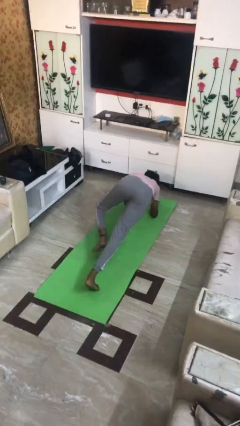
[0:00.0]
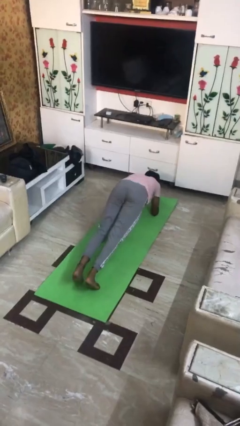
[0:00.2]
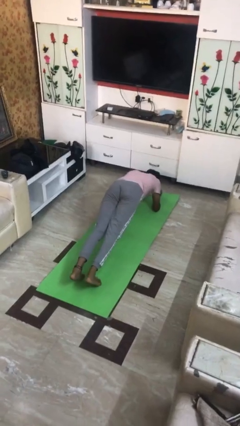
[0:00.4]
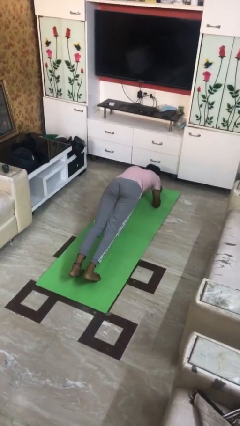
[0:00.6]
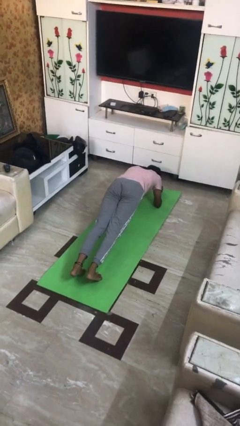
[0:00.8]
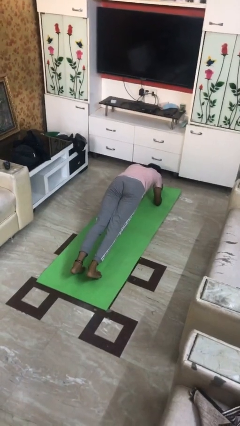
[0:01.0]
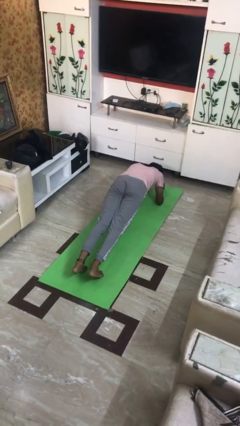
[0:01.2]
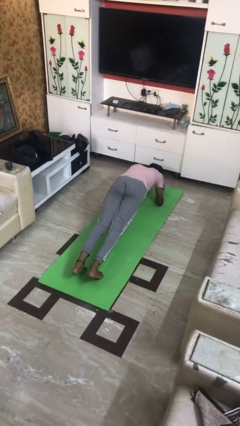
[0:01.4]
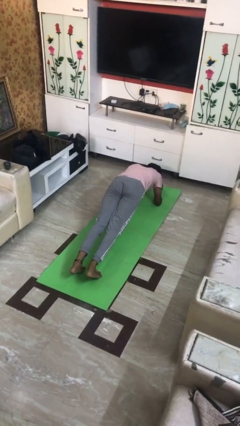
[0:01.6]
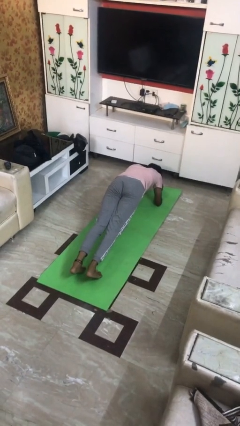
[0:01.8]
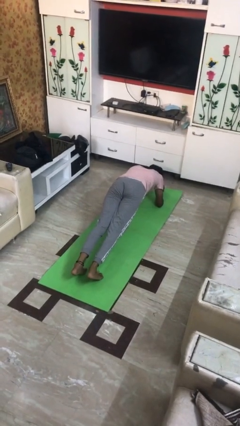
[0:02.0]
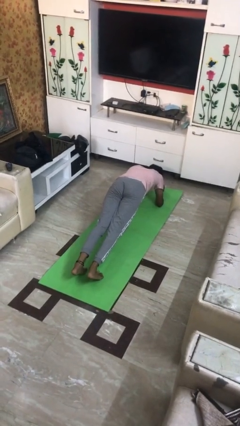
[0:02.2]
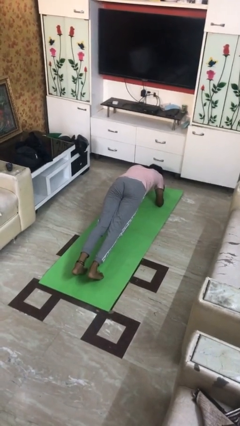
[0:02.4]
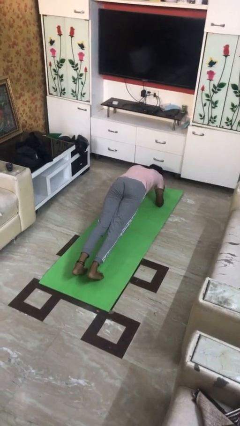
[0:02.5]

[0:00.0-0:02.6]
person exercises with plank

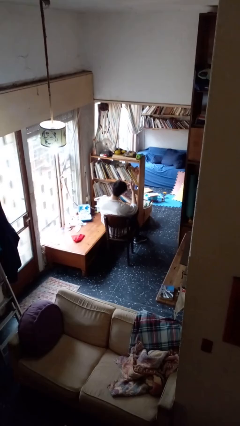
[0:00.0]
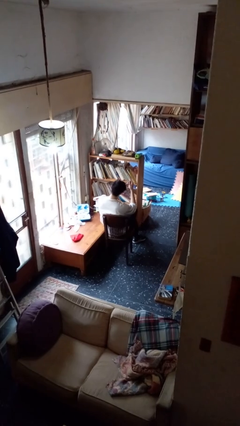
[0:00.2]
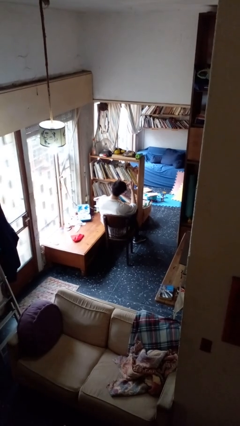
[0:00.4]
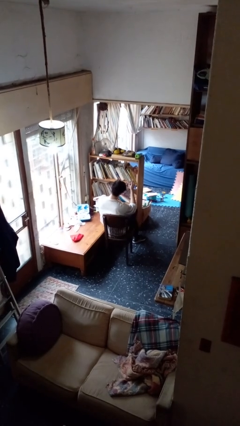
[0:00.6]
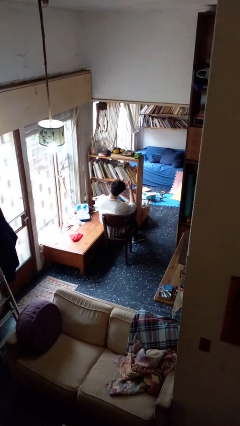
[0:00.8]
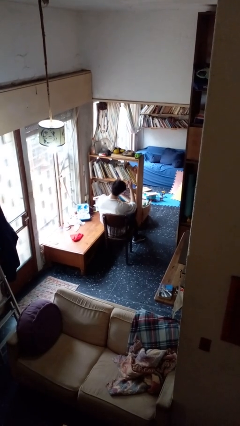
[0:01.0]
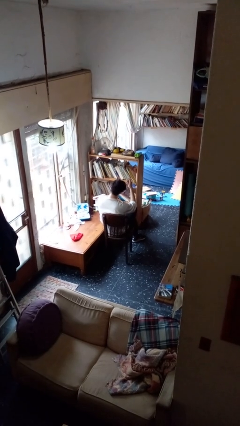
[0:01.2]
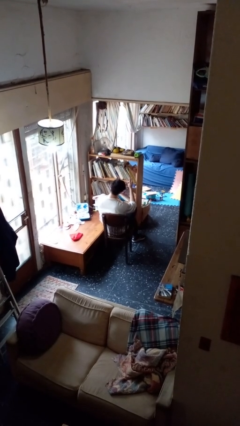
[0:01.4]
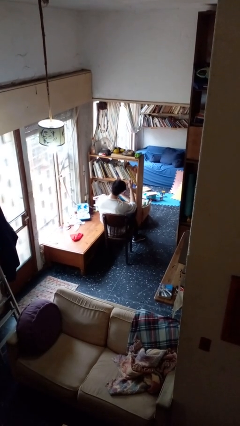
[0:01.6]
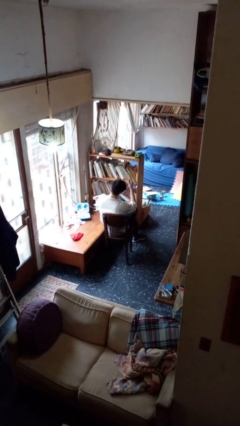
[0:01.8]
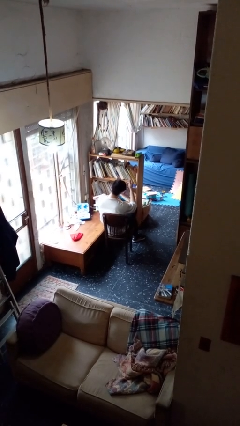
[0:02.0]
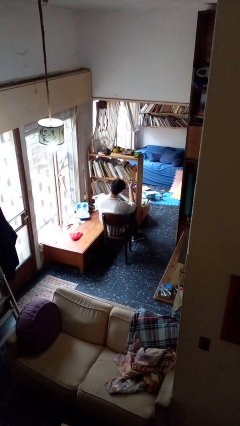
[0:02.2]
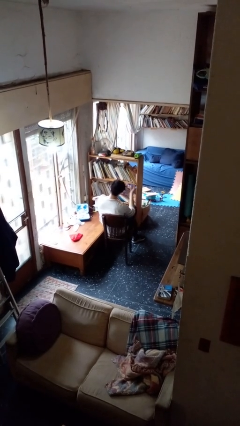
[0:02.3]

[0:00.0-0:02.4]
person clips fingernails

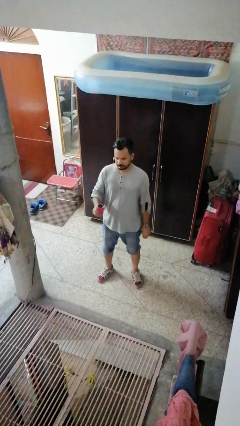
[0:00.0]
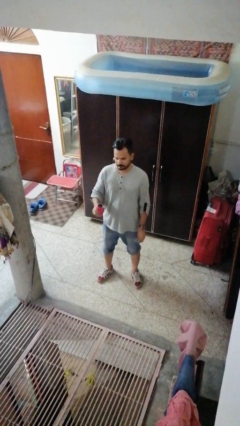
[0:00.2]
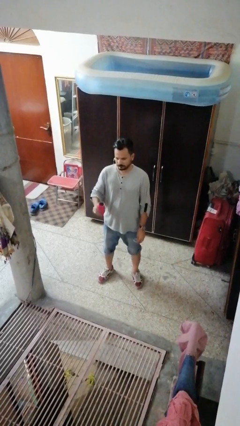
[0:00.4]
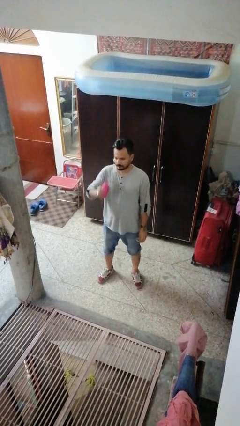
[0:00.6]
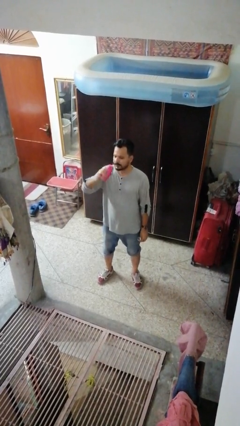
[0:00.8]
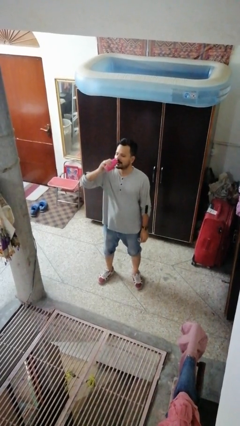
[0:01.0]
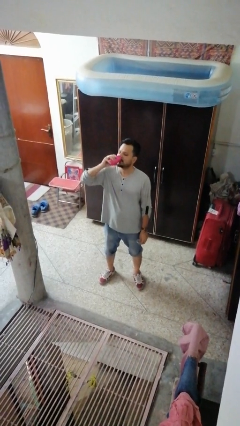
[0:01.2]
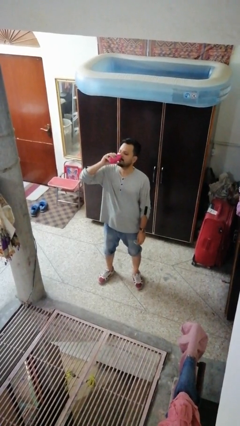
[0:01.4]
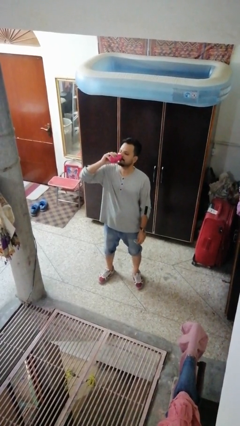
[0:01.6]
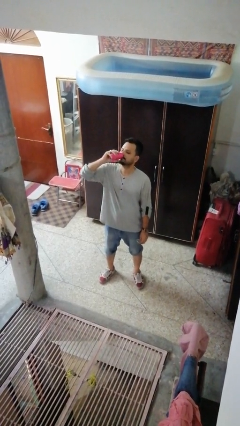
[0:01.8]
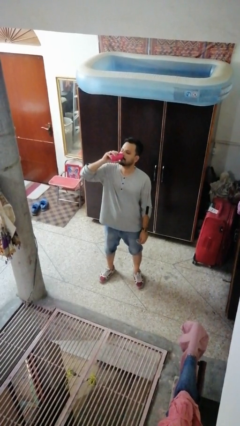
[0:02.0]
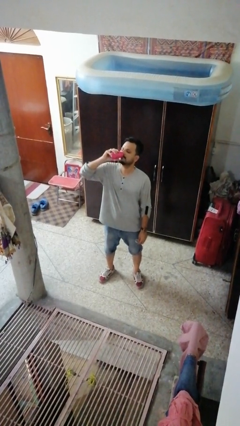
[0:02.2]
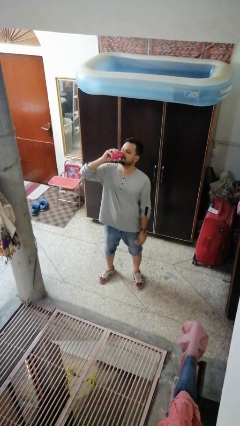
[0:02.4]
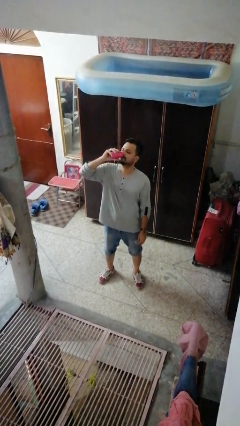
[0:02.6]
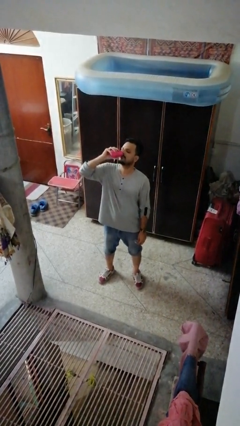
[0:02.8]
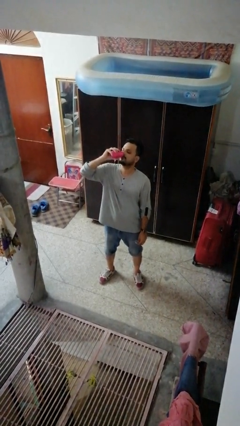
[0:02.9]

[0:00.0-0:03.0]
person drinks from beverage can

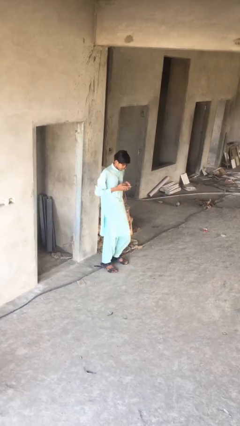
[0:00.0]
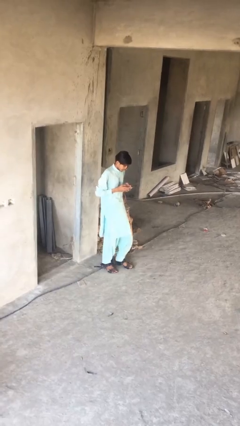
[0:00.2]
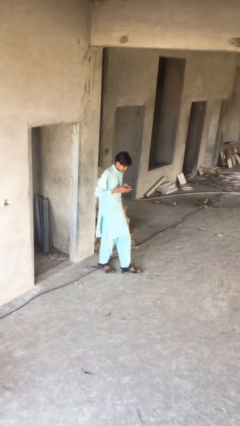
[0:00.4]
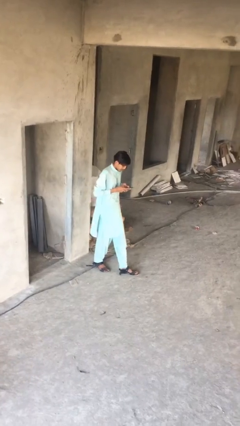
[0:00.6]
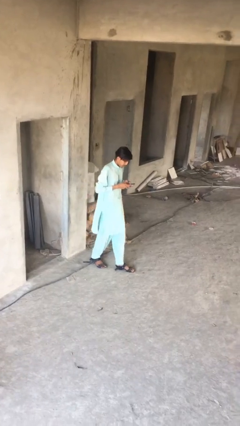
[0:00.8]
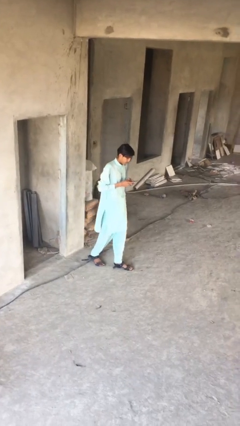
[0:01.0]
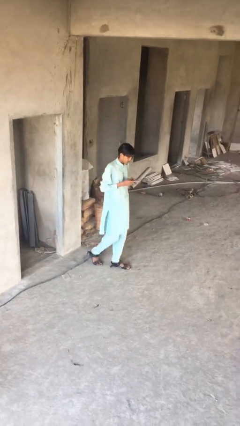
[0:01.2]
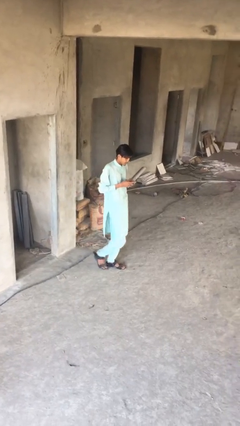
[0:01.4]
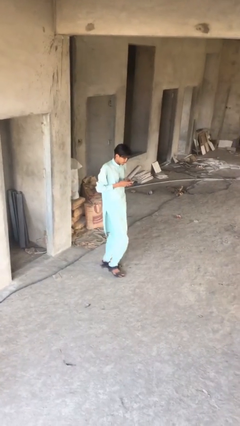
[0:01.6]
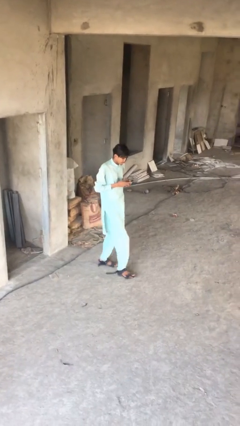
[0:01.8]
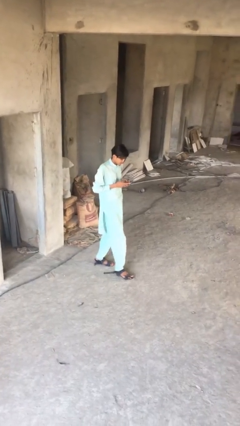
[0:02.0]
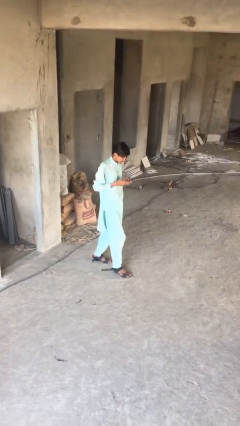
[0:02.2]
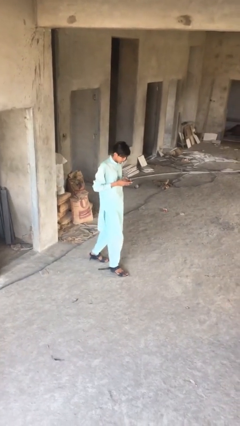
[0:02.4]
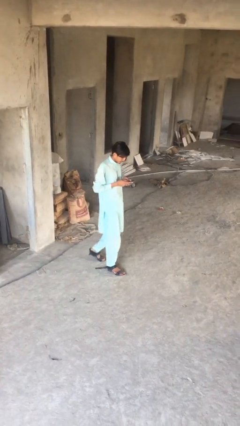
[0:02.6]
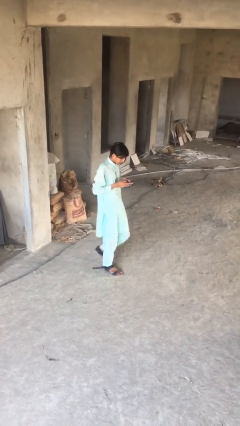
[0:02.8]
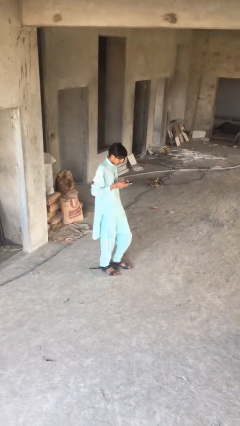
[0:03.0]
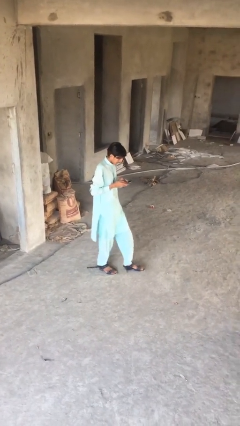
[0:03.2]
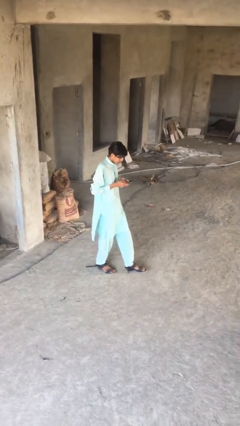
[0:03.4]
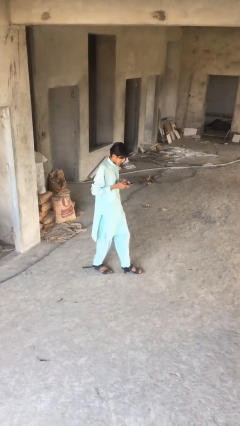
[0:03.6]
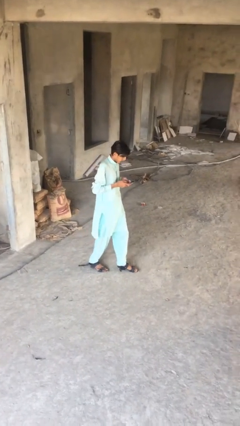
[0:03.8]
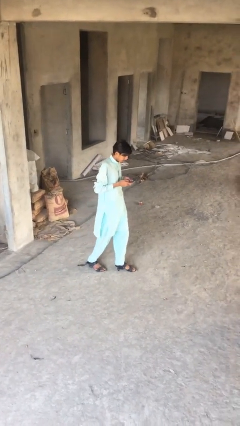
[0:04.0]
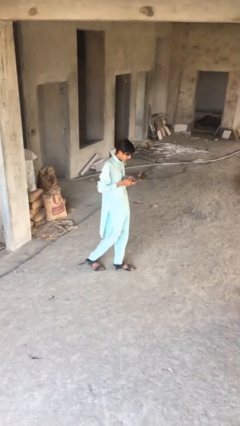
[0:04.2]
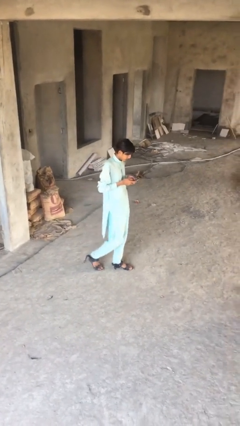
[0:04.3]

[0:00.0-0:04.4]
person texts on phone

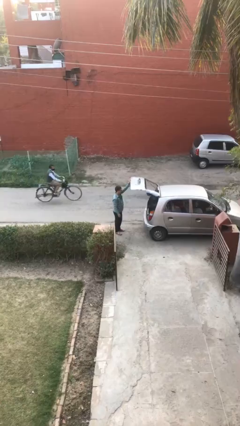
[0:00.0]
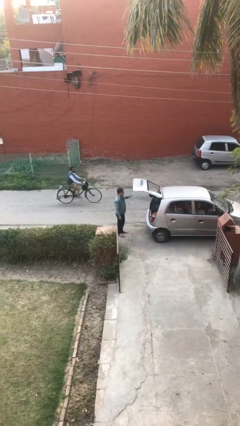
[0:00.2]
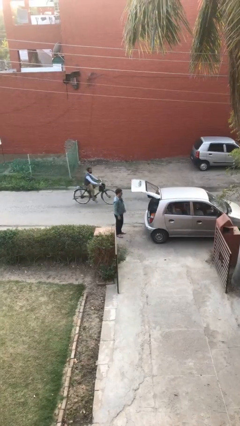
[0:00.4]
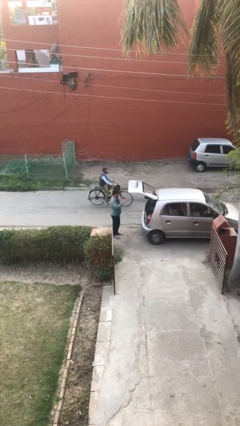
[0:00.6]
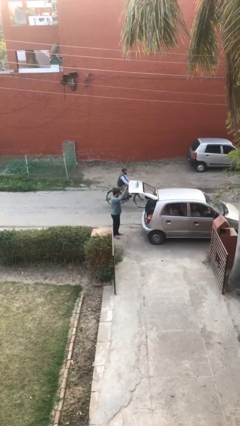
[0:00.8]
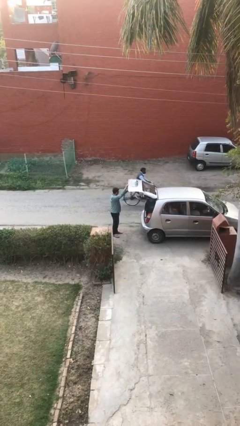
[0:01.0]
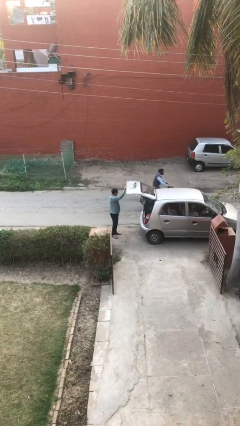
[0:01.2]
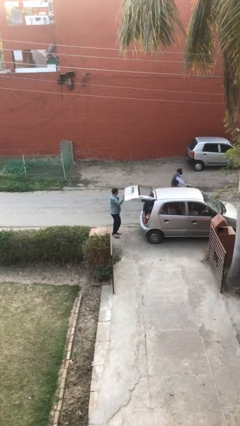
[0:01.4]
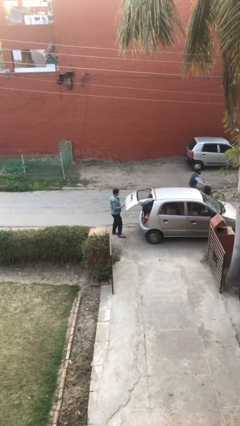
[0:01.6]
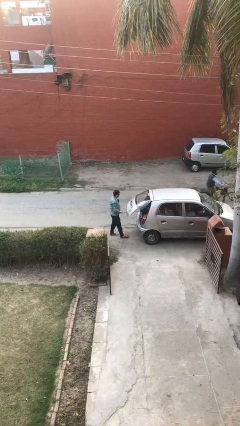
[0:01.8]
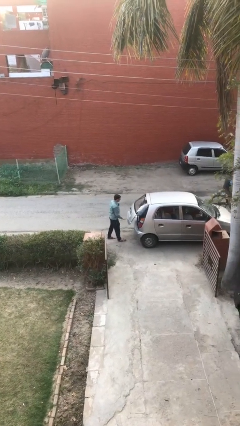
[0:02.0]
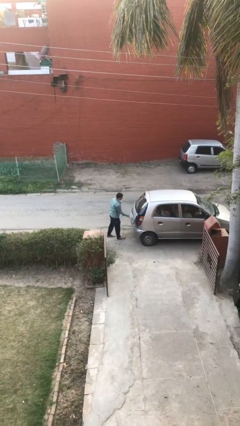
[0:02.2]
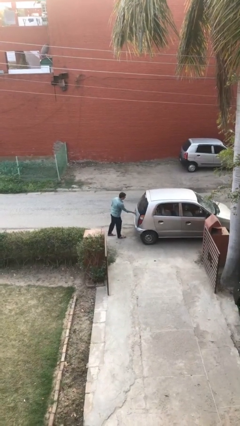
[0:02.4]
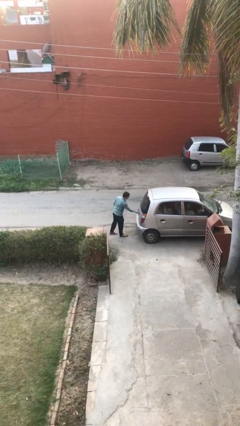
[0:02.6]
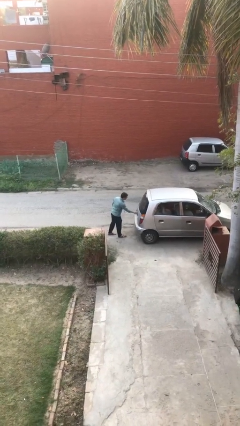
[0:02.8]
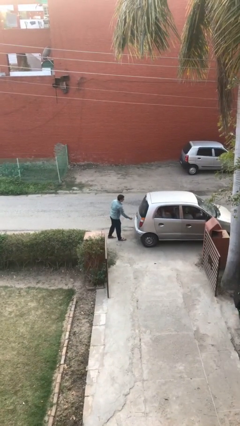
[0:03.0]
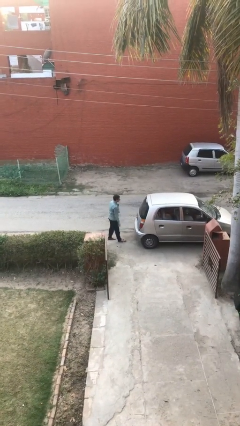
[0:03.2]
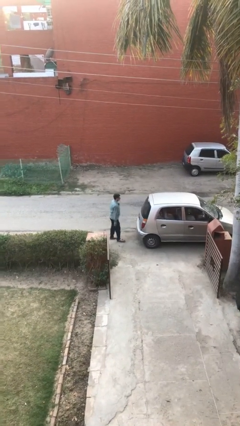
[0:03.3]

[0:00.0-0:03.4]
person closes car trunk

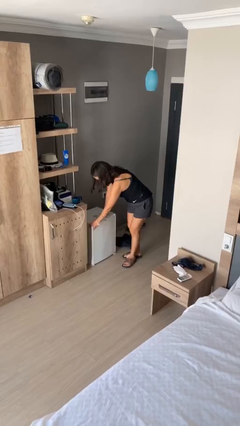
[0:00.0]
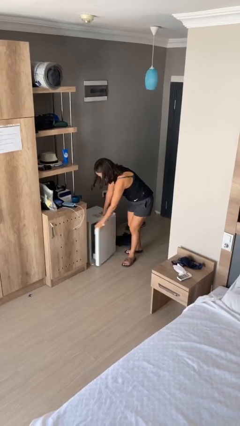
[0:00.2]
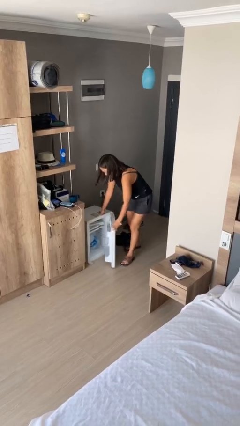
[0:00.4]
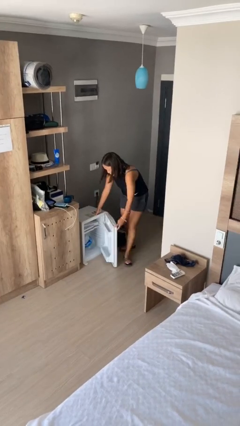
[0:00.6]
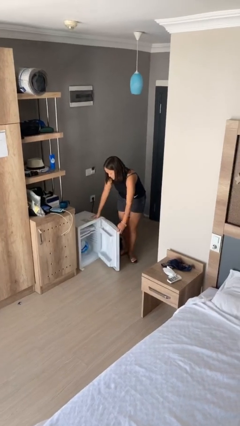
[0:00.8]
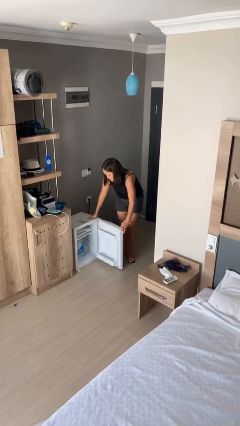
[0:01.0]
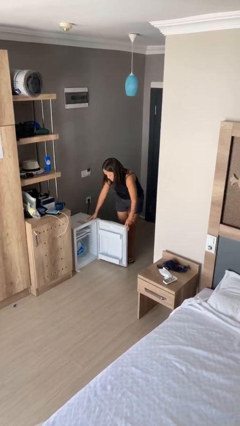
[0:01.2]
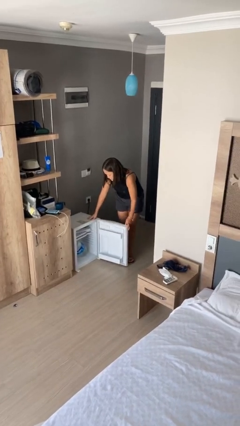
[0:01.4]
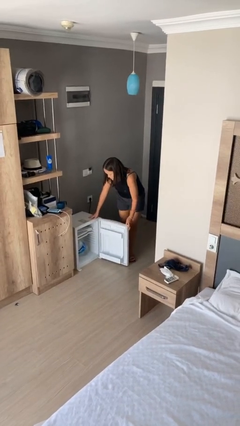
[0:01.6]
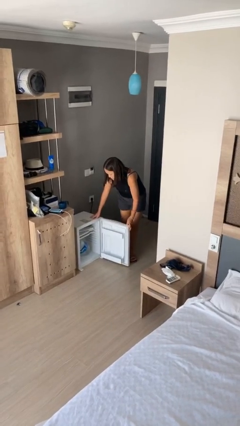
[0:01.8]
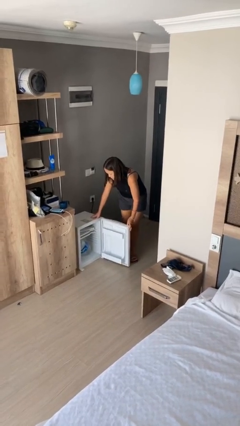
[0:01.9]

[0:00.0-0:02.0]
person opens refrigerator
